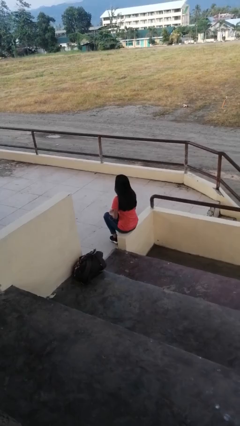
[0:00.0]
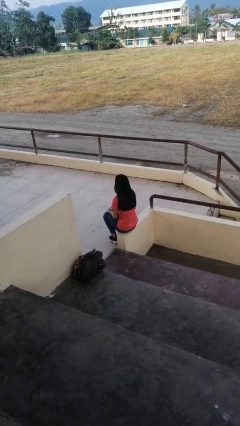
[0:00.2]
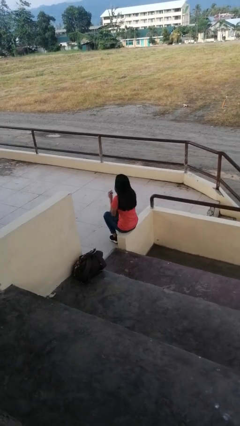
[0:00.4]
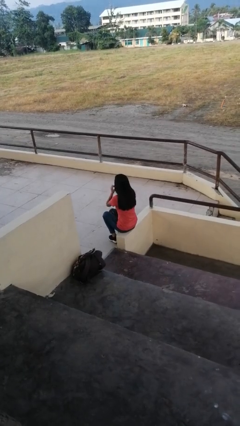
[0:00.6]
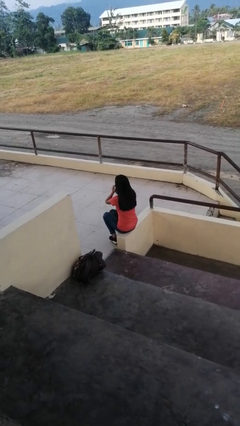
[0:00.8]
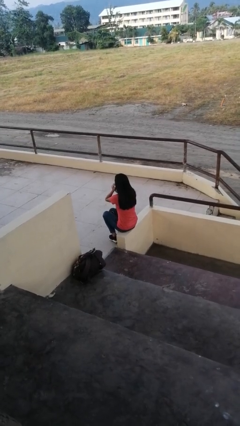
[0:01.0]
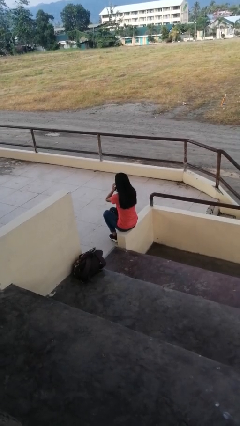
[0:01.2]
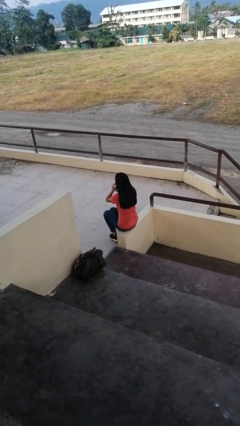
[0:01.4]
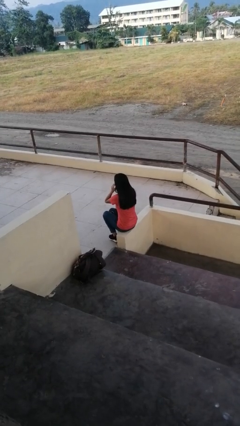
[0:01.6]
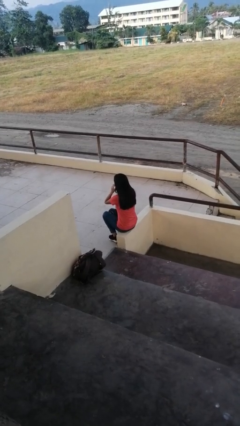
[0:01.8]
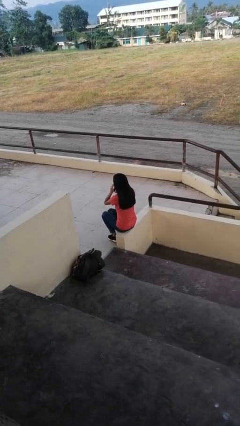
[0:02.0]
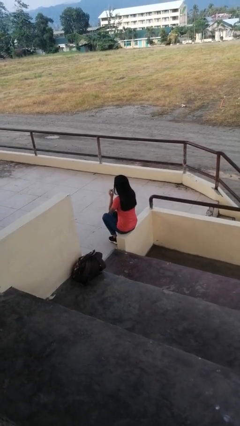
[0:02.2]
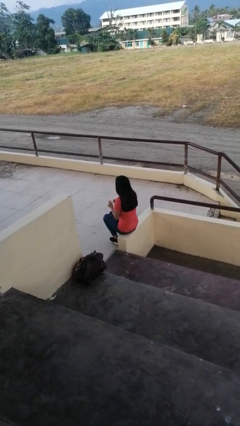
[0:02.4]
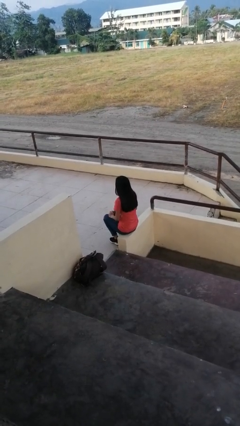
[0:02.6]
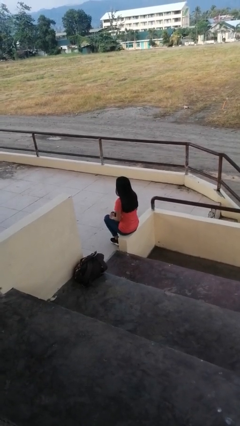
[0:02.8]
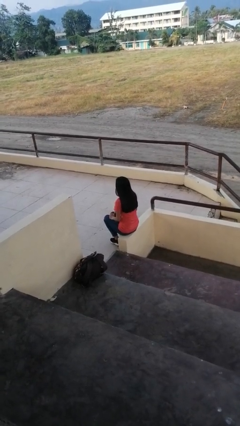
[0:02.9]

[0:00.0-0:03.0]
person puts on headphones

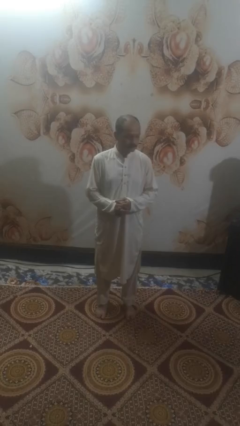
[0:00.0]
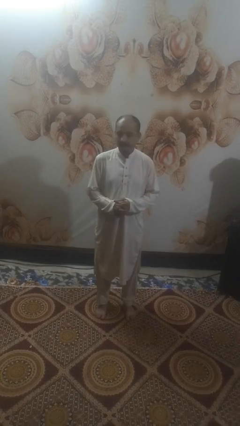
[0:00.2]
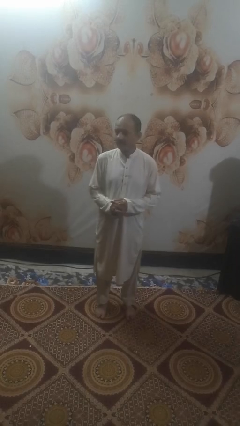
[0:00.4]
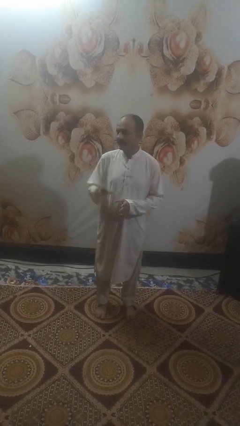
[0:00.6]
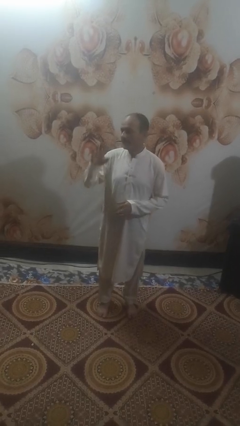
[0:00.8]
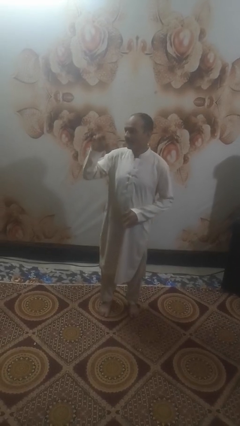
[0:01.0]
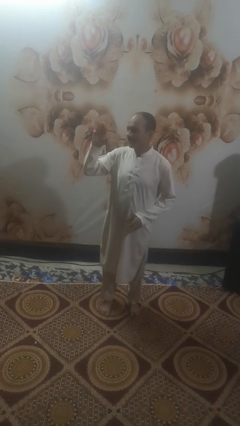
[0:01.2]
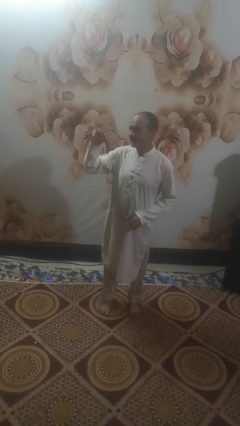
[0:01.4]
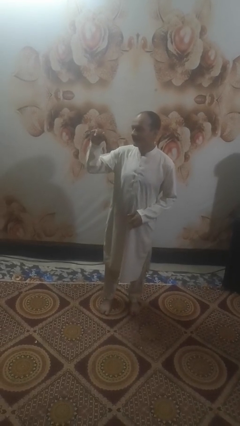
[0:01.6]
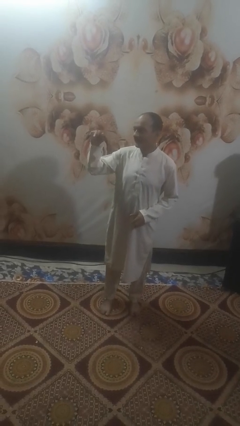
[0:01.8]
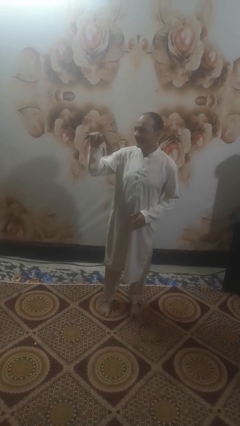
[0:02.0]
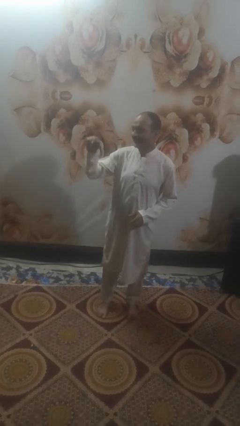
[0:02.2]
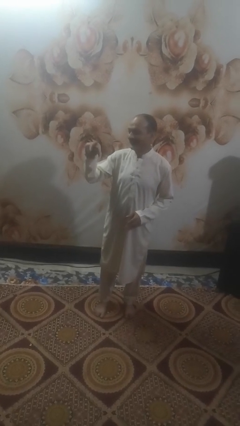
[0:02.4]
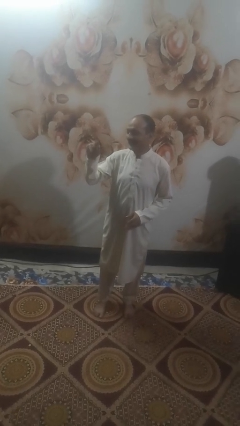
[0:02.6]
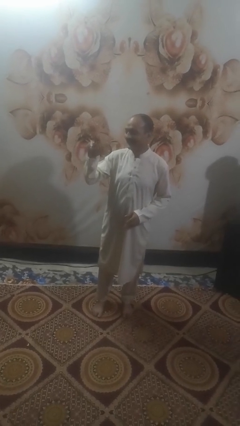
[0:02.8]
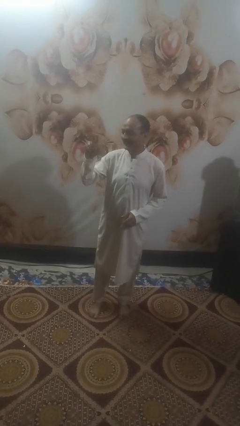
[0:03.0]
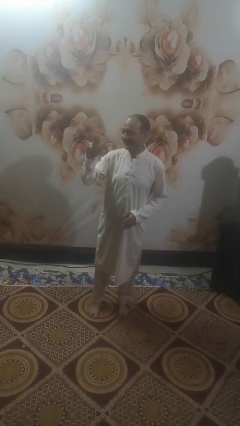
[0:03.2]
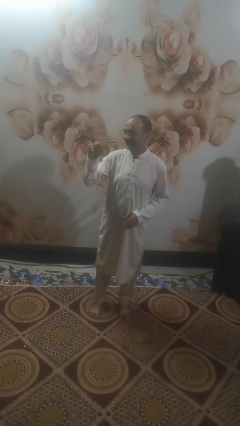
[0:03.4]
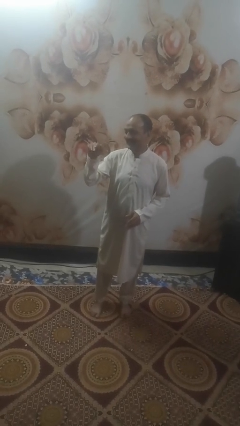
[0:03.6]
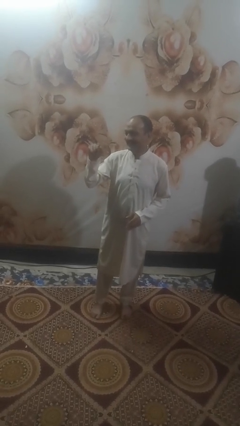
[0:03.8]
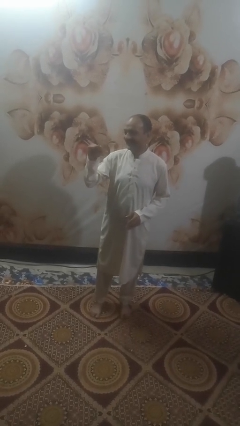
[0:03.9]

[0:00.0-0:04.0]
person gestures come here

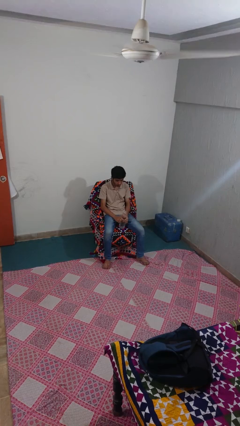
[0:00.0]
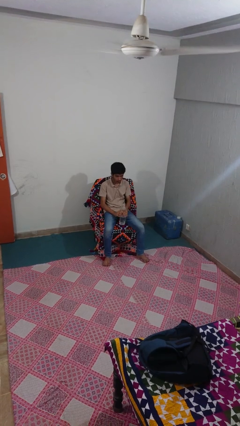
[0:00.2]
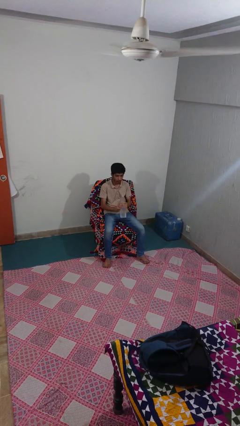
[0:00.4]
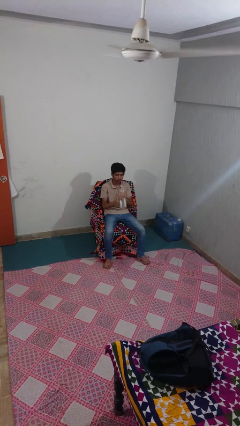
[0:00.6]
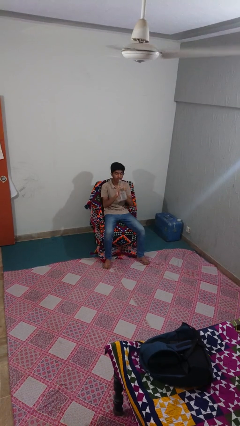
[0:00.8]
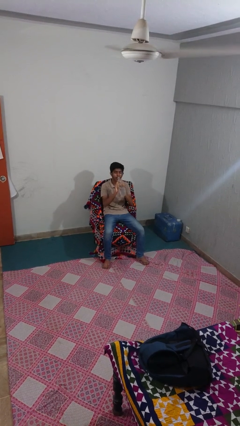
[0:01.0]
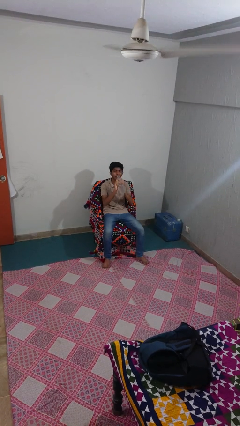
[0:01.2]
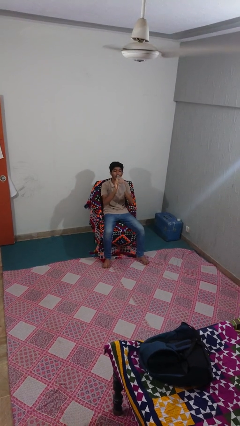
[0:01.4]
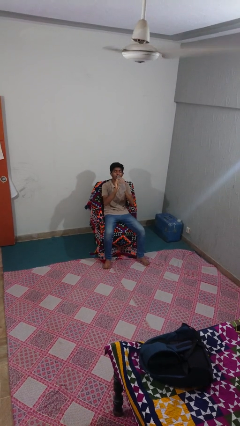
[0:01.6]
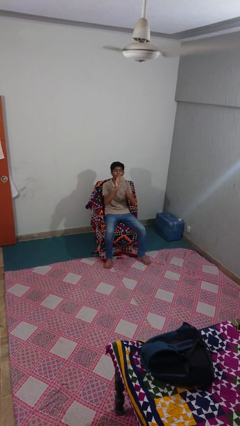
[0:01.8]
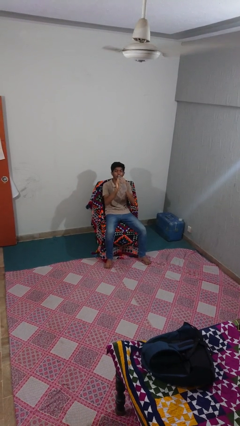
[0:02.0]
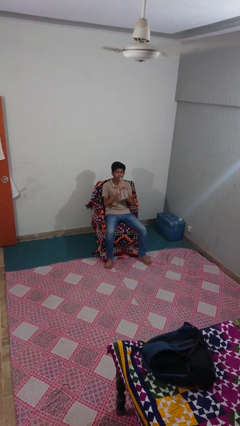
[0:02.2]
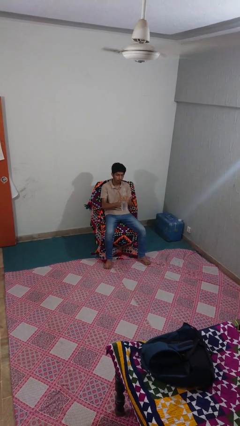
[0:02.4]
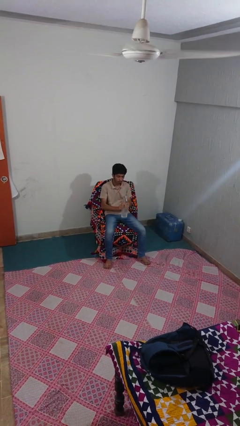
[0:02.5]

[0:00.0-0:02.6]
person drinks from bottle

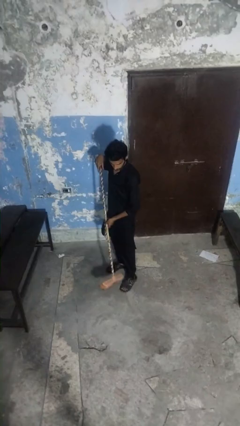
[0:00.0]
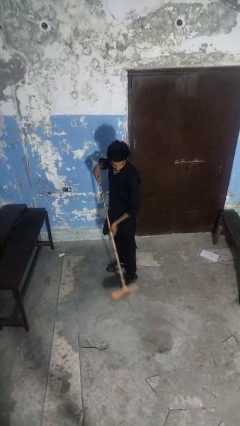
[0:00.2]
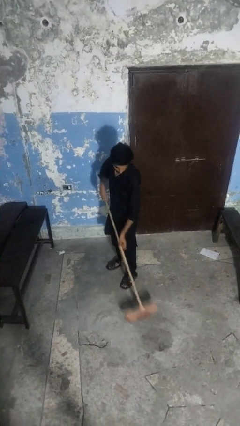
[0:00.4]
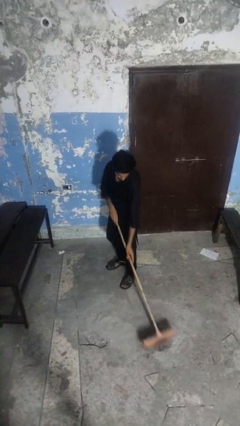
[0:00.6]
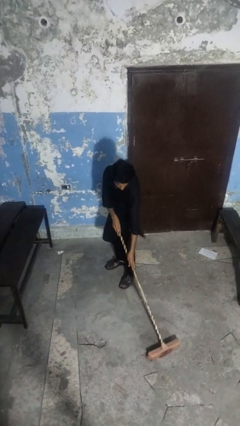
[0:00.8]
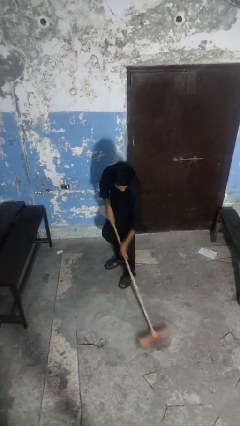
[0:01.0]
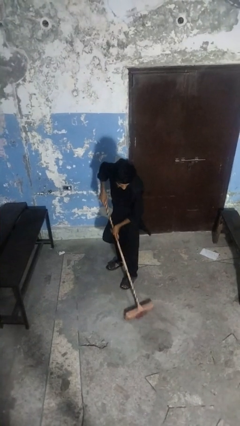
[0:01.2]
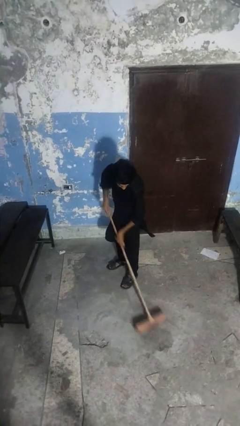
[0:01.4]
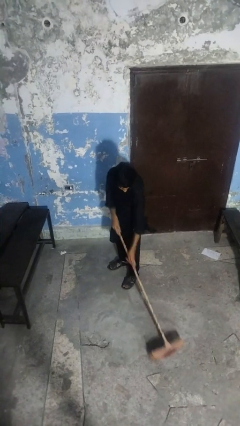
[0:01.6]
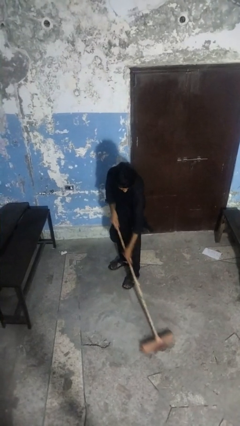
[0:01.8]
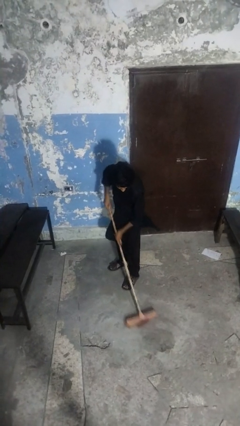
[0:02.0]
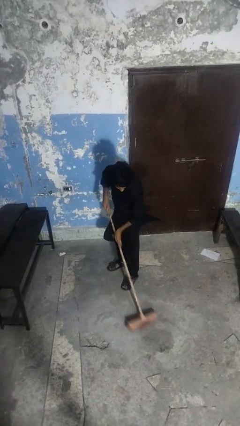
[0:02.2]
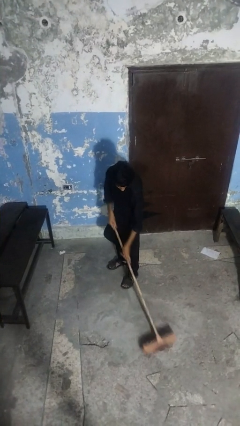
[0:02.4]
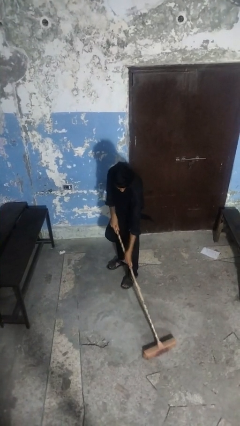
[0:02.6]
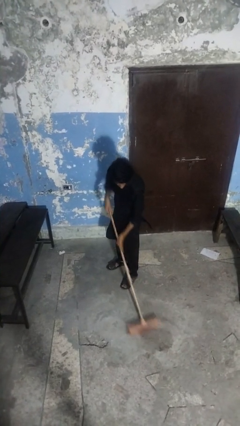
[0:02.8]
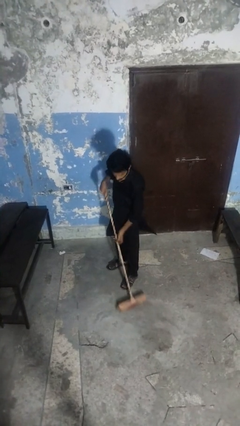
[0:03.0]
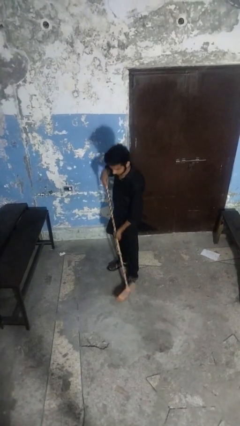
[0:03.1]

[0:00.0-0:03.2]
person sweeps floor

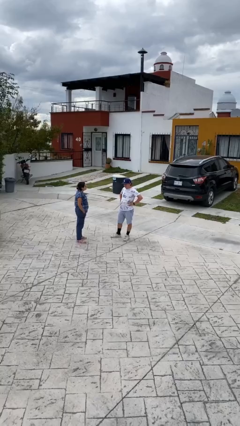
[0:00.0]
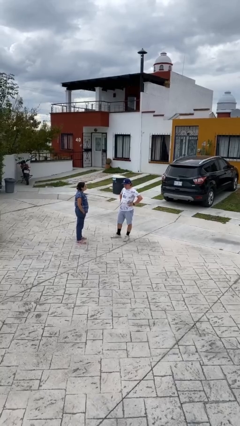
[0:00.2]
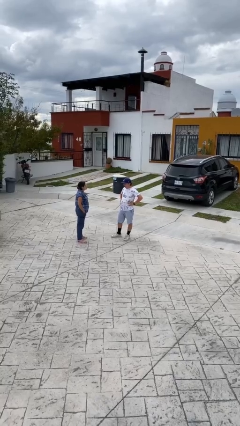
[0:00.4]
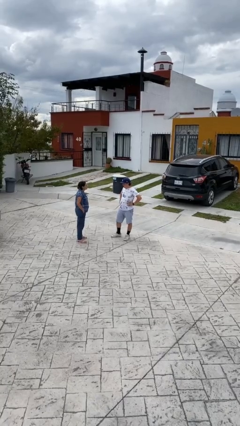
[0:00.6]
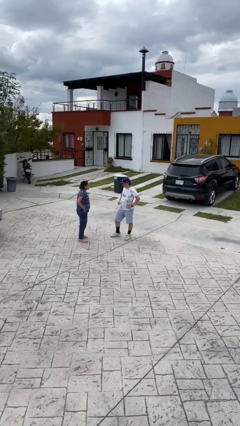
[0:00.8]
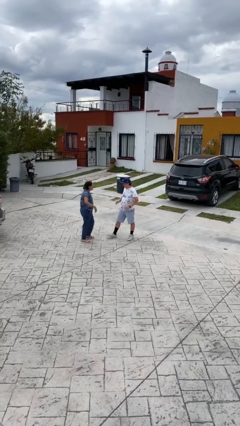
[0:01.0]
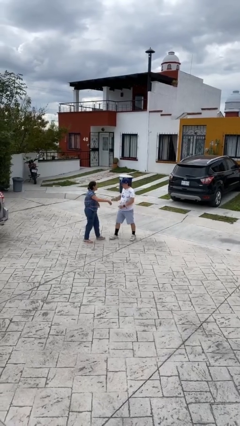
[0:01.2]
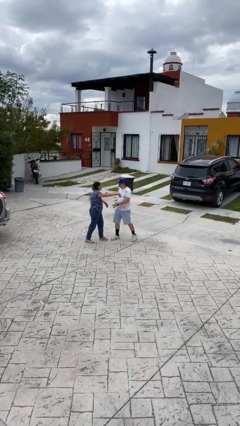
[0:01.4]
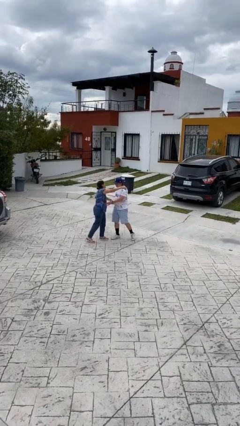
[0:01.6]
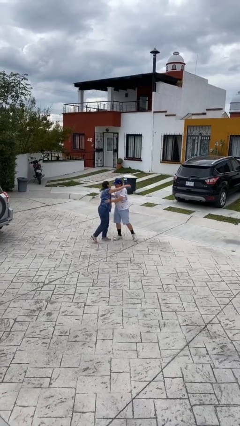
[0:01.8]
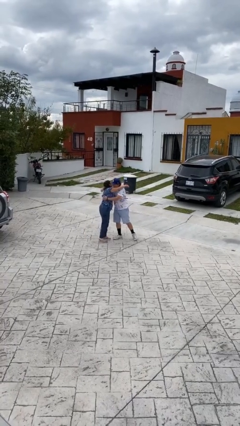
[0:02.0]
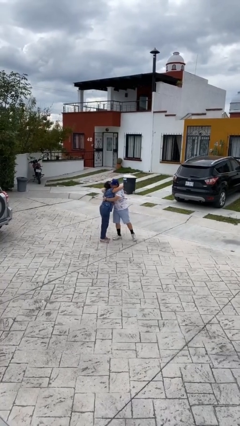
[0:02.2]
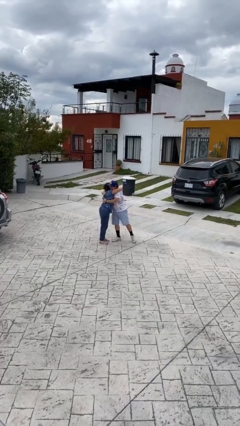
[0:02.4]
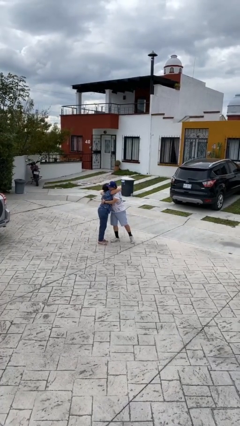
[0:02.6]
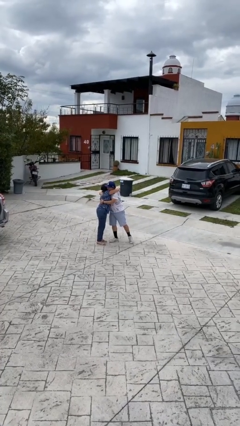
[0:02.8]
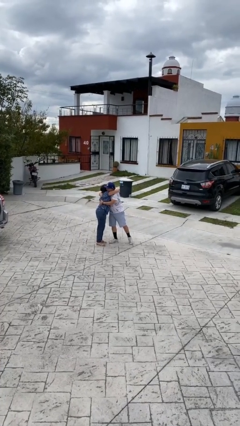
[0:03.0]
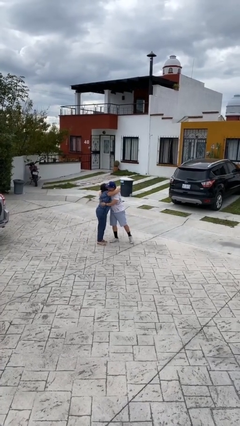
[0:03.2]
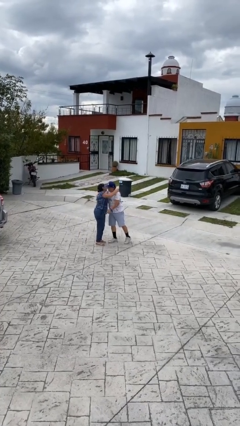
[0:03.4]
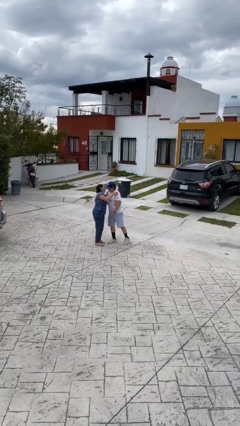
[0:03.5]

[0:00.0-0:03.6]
person embraces person

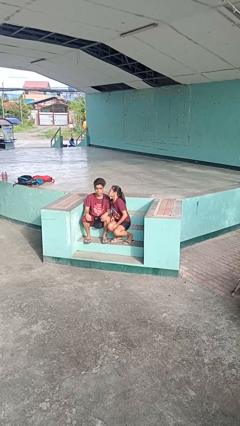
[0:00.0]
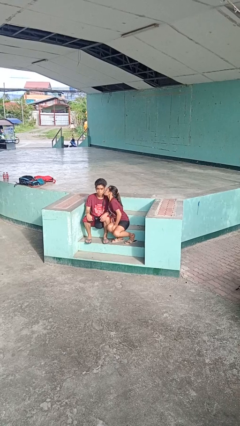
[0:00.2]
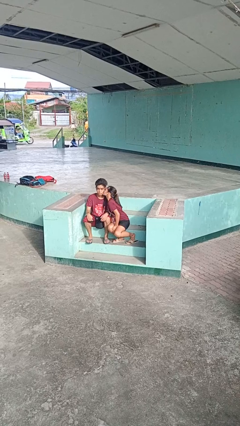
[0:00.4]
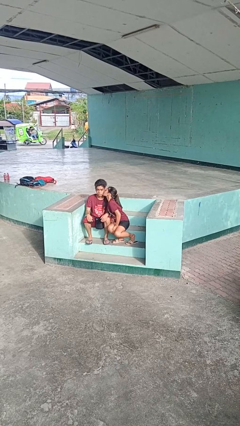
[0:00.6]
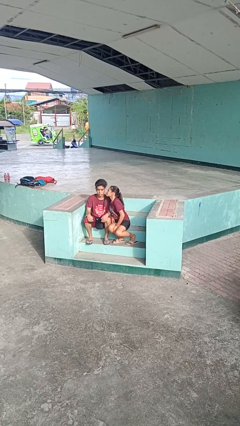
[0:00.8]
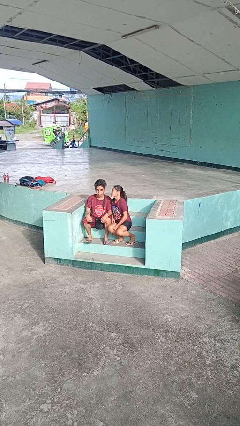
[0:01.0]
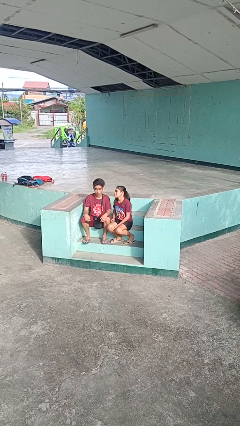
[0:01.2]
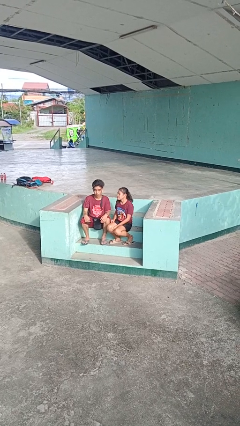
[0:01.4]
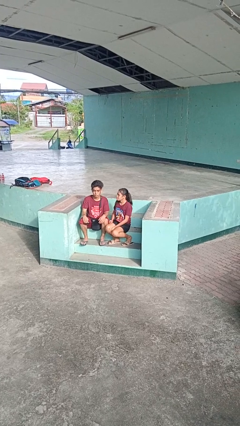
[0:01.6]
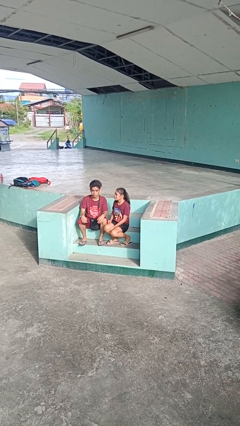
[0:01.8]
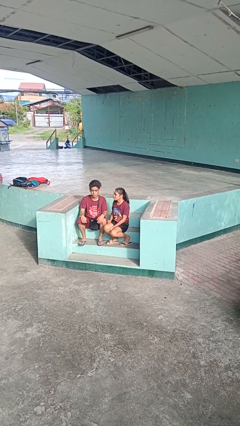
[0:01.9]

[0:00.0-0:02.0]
person kisses cheek of person
